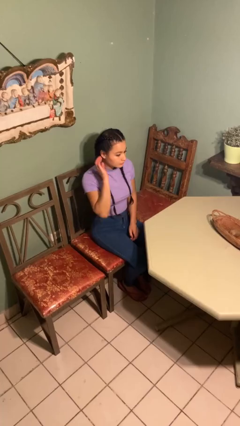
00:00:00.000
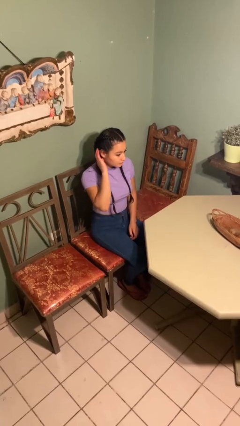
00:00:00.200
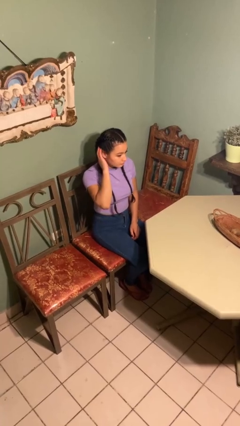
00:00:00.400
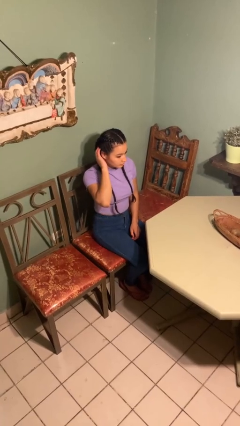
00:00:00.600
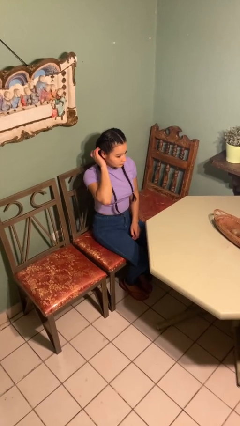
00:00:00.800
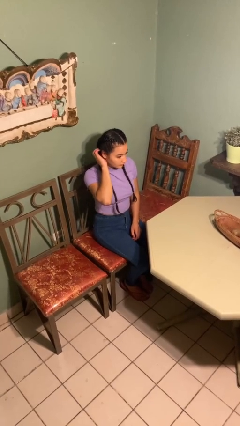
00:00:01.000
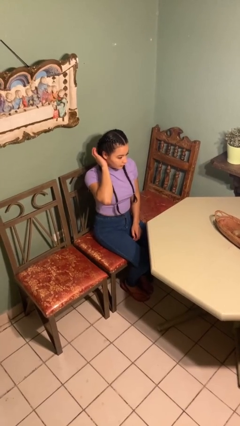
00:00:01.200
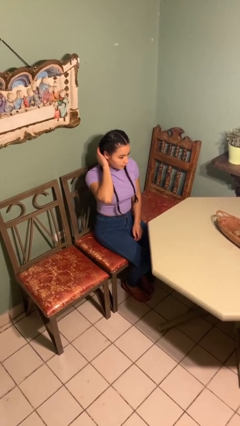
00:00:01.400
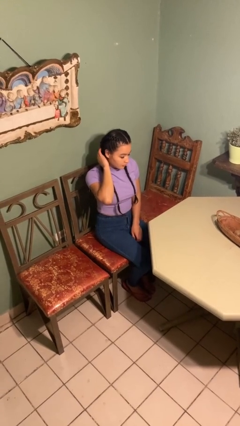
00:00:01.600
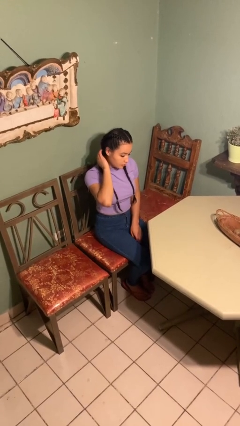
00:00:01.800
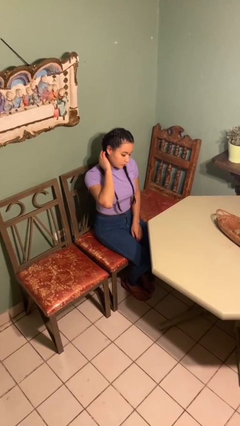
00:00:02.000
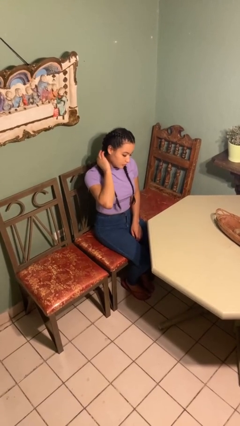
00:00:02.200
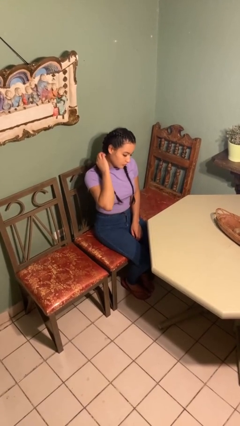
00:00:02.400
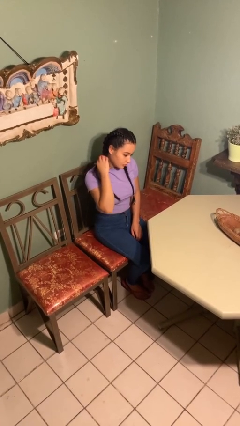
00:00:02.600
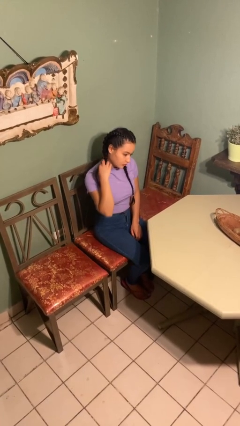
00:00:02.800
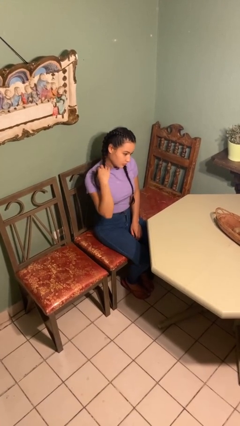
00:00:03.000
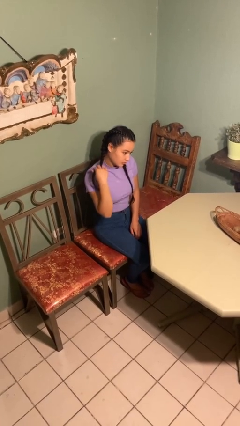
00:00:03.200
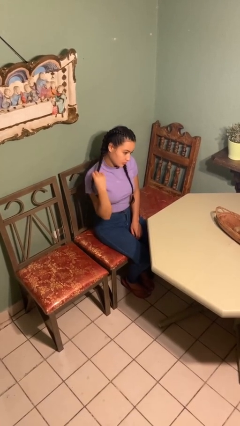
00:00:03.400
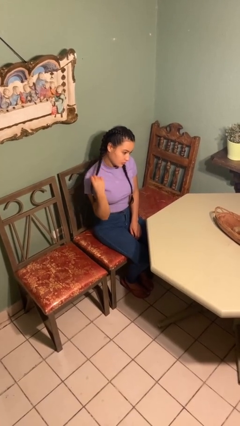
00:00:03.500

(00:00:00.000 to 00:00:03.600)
person strokes hair

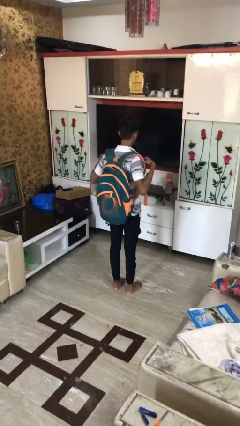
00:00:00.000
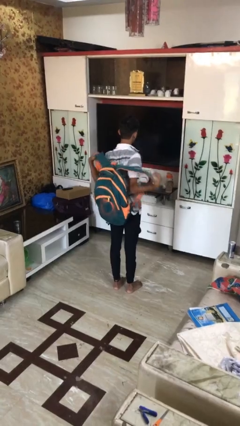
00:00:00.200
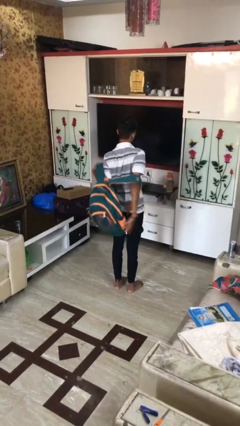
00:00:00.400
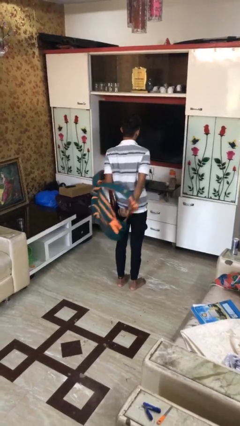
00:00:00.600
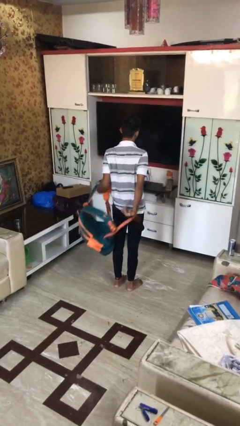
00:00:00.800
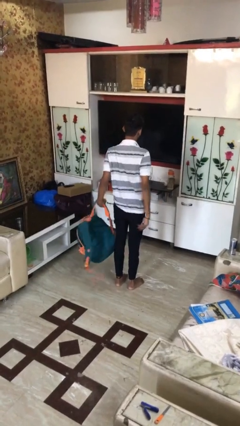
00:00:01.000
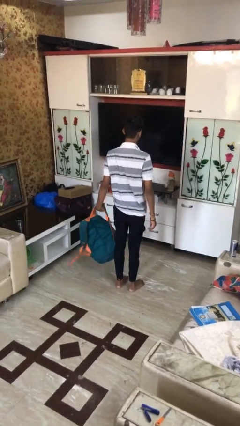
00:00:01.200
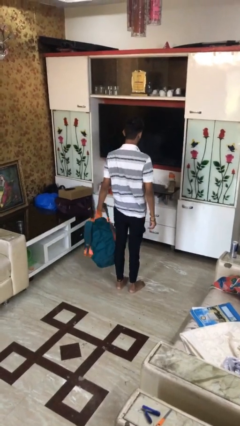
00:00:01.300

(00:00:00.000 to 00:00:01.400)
person takes off backpack

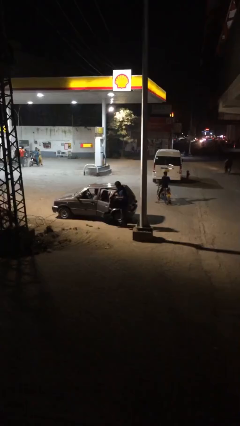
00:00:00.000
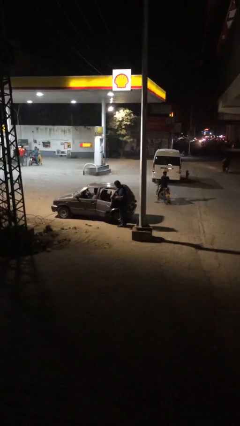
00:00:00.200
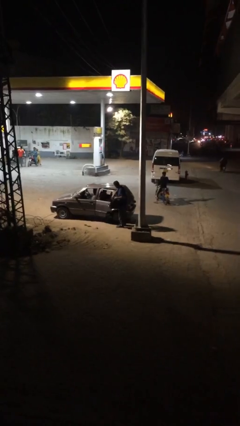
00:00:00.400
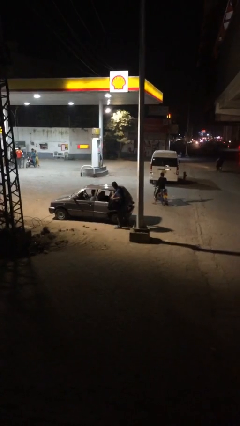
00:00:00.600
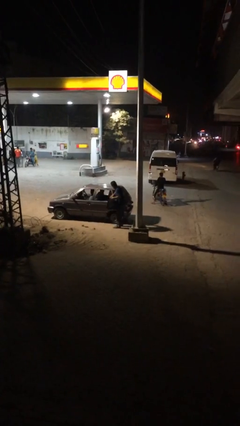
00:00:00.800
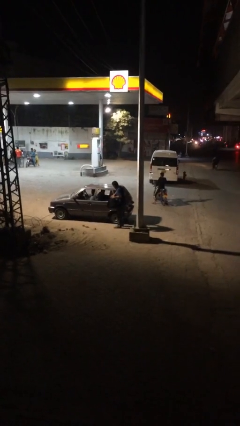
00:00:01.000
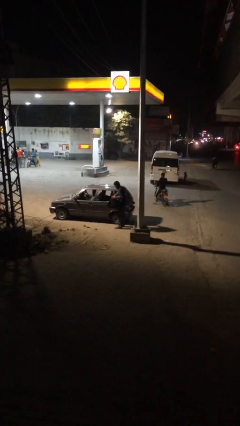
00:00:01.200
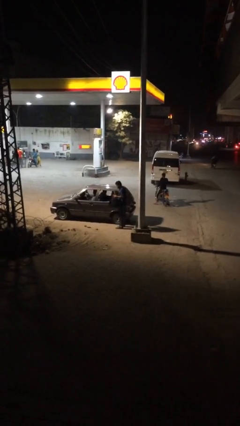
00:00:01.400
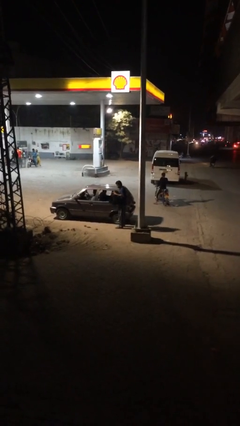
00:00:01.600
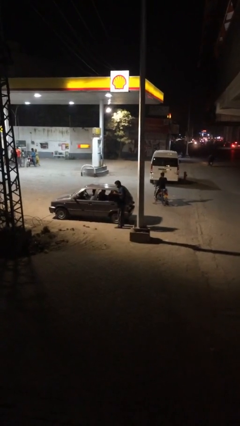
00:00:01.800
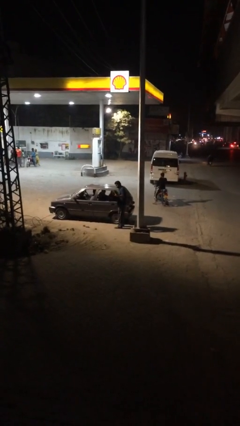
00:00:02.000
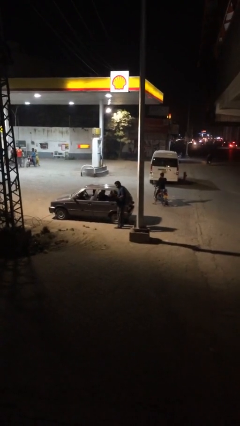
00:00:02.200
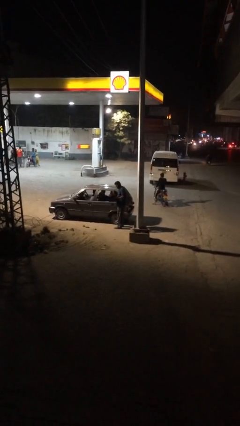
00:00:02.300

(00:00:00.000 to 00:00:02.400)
person closes car door

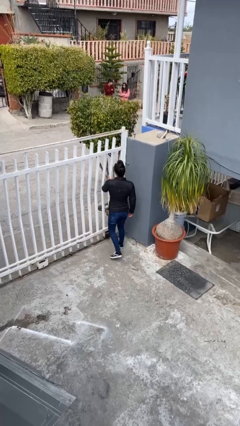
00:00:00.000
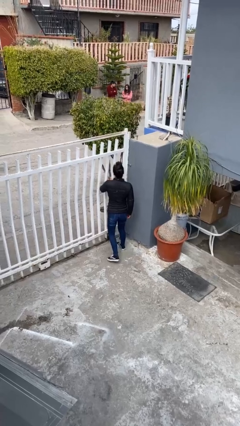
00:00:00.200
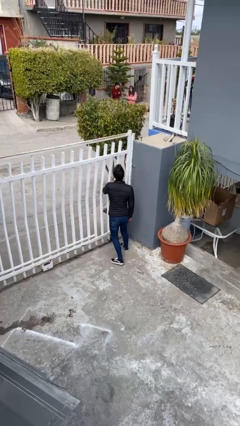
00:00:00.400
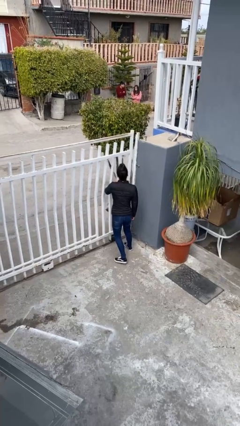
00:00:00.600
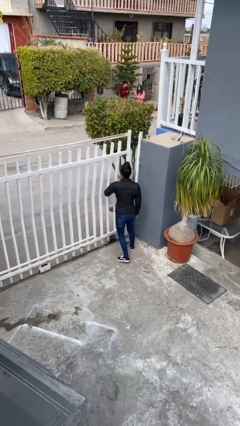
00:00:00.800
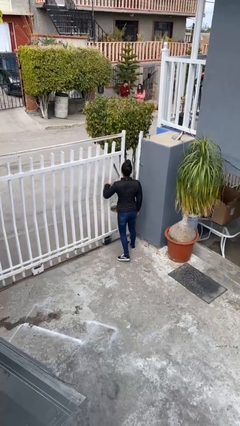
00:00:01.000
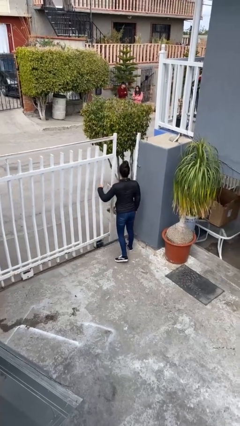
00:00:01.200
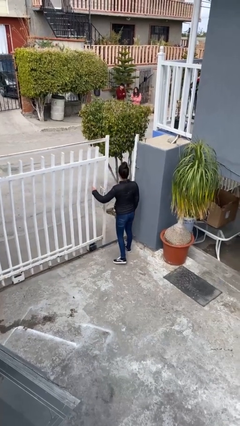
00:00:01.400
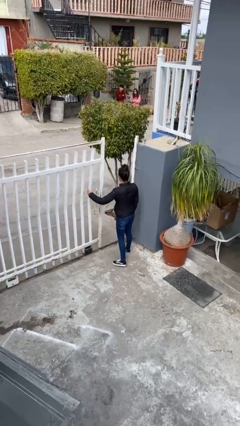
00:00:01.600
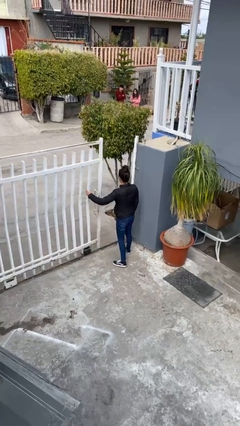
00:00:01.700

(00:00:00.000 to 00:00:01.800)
person opens facility door

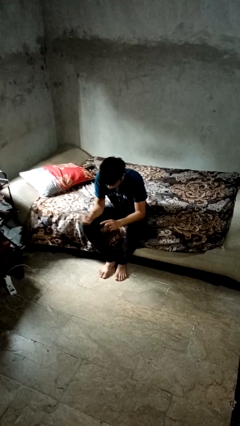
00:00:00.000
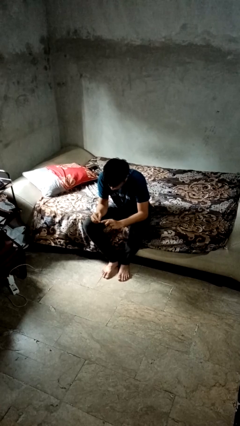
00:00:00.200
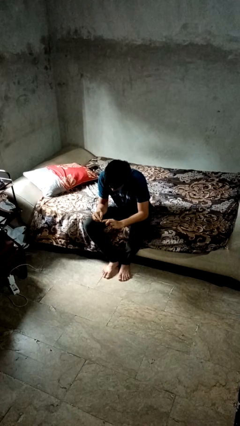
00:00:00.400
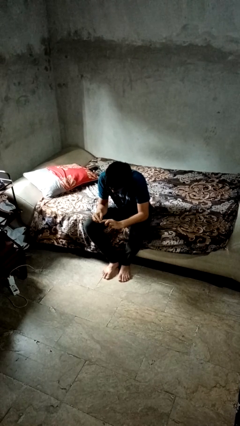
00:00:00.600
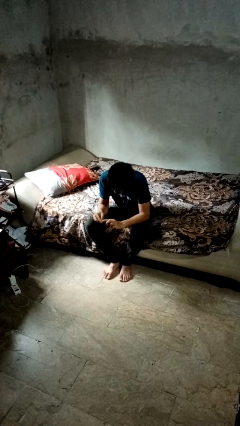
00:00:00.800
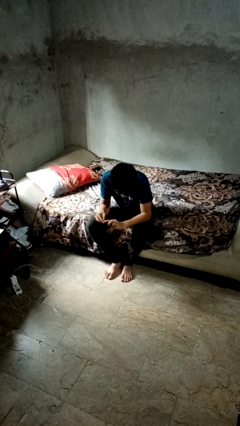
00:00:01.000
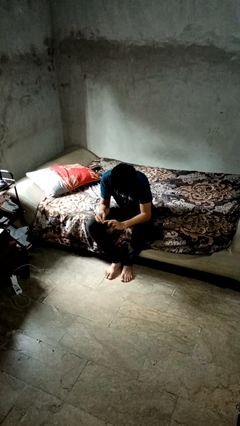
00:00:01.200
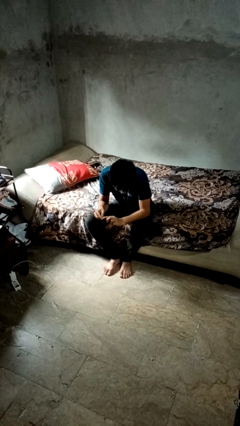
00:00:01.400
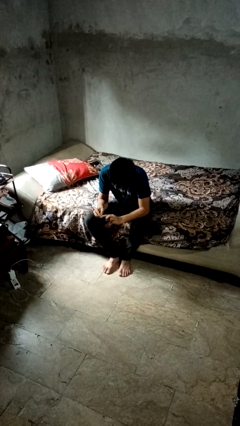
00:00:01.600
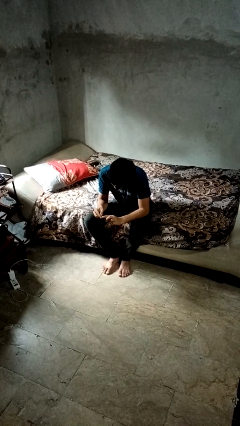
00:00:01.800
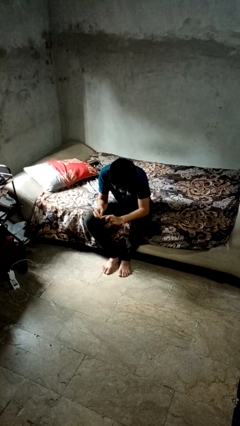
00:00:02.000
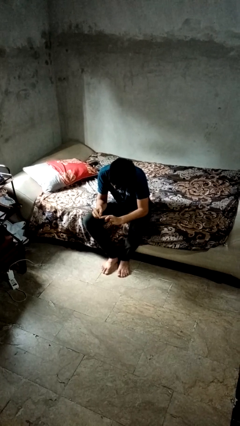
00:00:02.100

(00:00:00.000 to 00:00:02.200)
person files fingernails

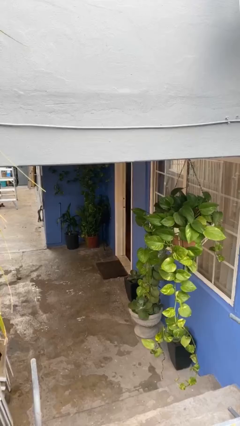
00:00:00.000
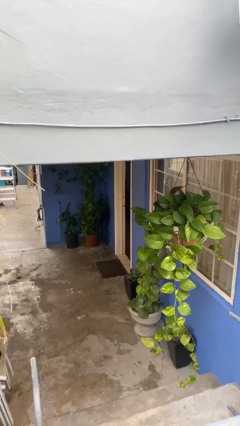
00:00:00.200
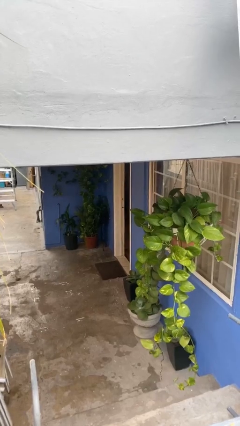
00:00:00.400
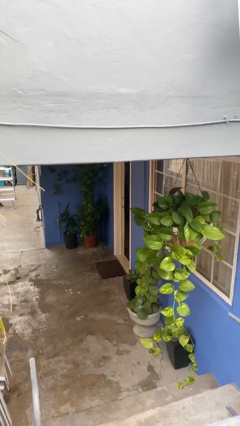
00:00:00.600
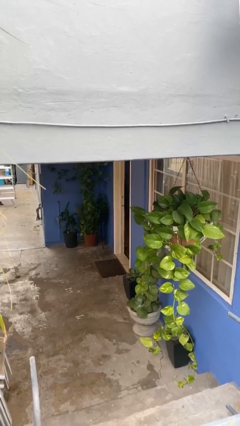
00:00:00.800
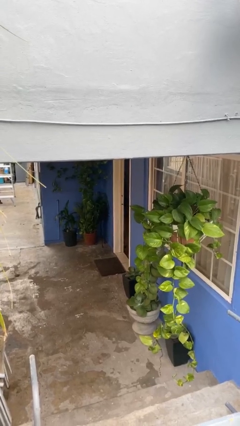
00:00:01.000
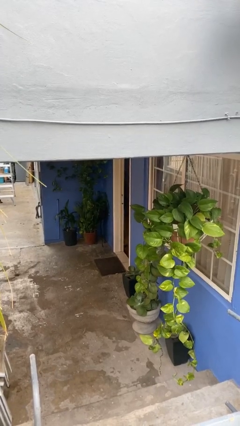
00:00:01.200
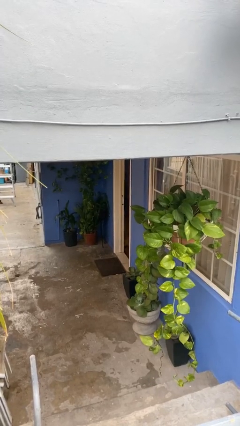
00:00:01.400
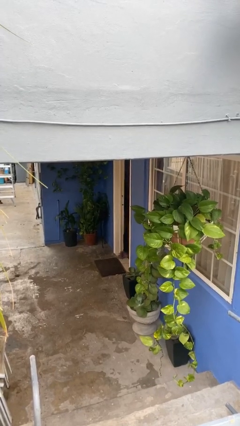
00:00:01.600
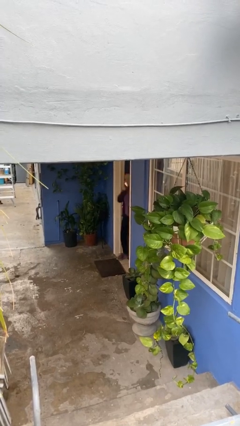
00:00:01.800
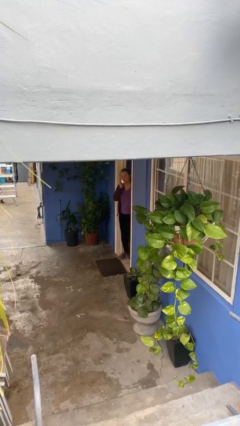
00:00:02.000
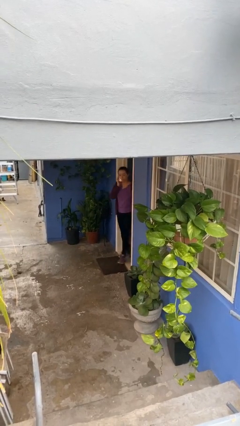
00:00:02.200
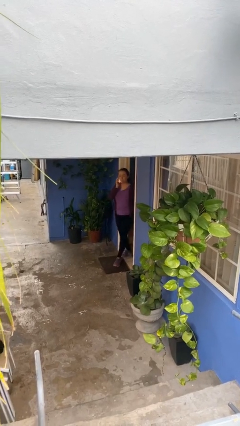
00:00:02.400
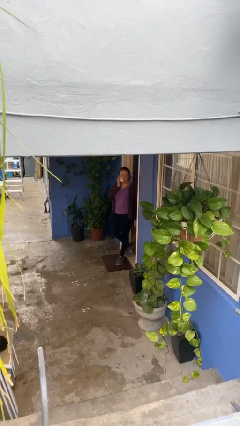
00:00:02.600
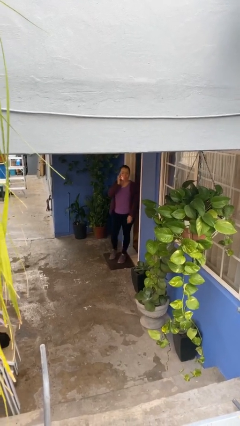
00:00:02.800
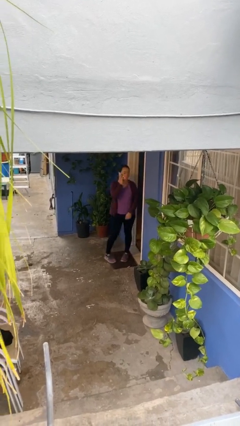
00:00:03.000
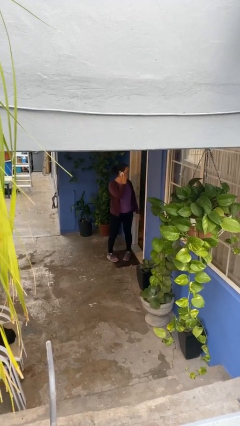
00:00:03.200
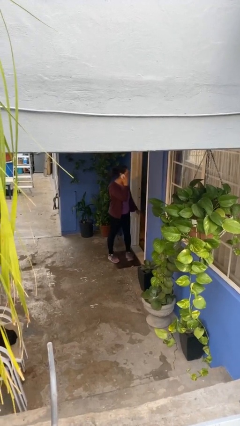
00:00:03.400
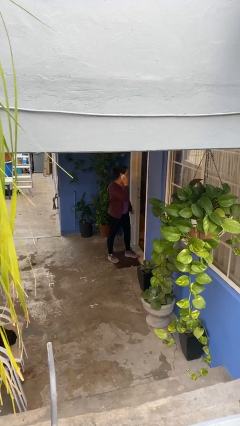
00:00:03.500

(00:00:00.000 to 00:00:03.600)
person enters scene through structure

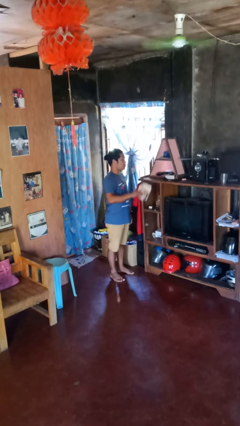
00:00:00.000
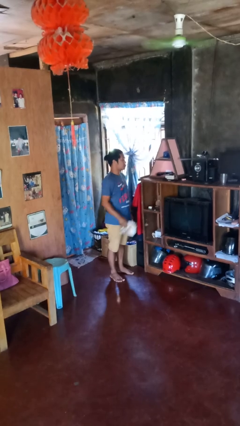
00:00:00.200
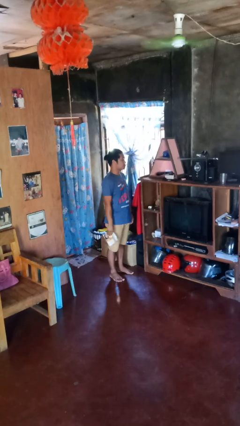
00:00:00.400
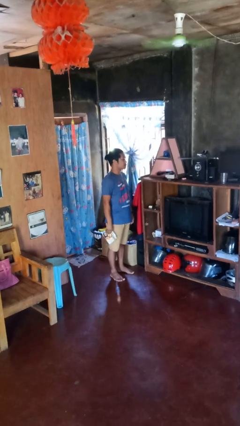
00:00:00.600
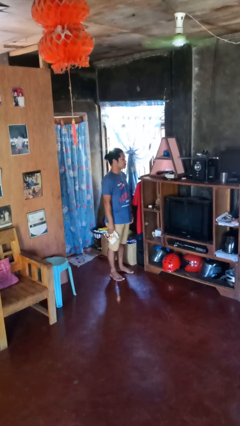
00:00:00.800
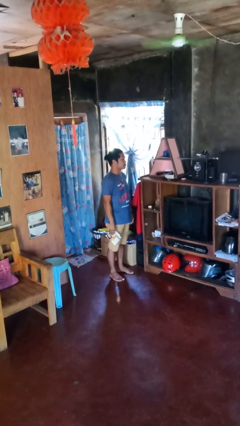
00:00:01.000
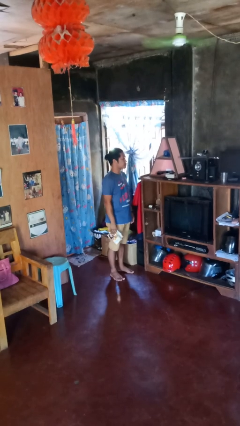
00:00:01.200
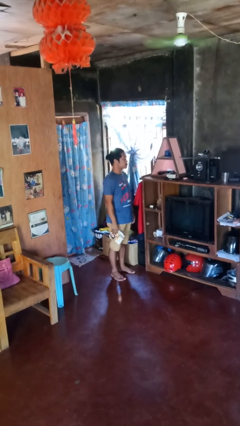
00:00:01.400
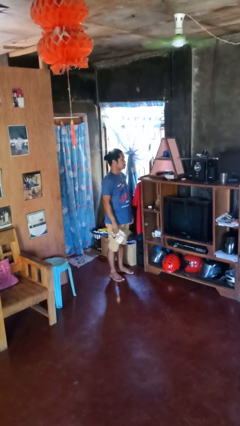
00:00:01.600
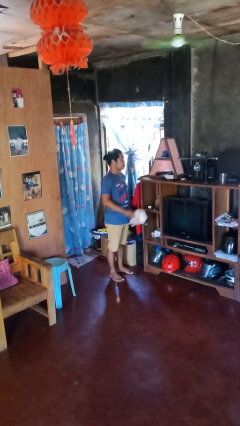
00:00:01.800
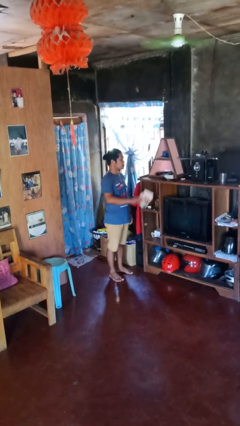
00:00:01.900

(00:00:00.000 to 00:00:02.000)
person picks up object from shelf

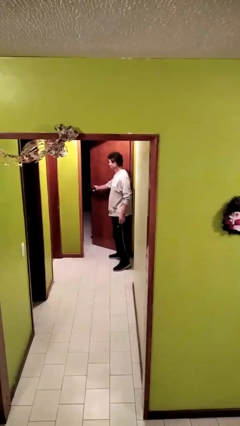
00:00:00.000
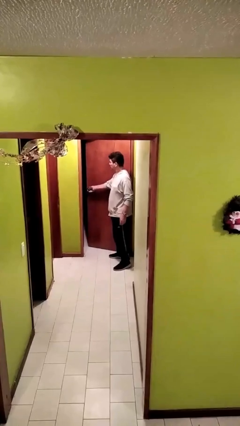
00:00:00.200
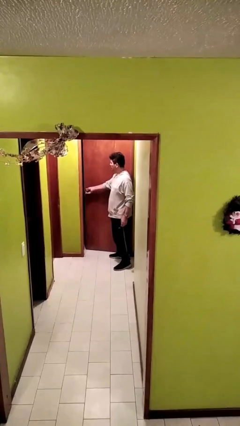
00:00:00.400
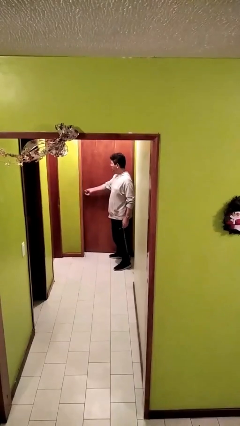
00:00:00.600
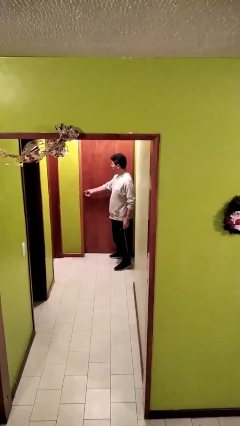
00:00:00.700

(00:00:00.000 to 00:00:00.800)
person closes facility door
